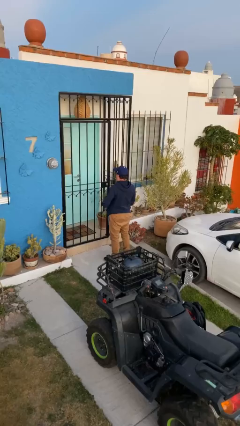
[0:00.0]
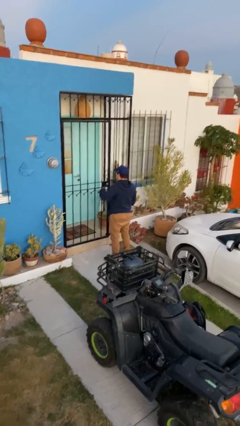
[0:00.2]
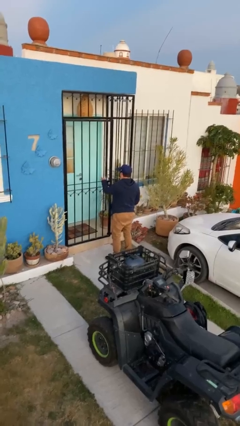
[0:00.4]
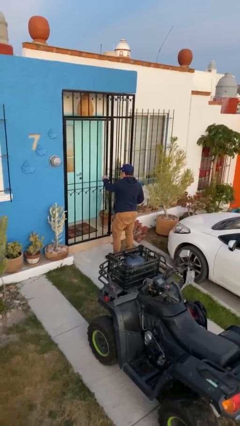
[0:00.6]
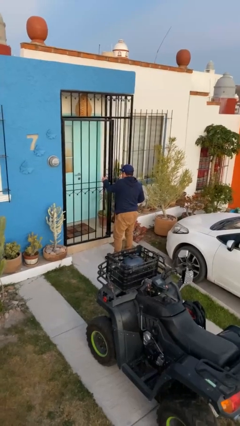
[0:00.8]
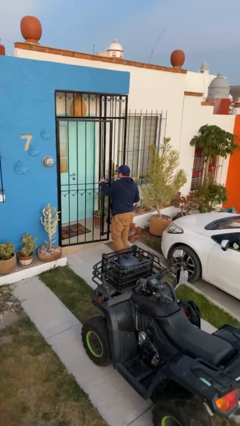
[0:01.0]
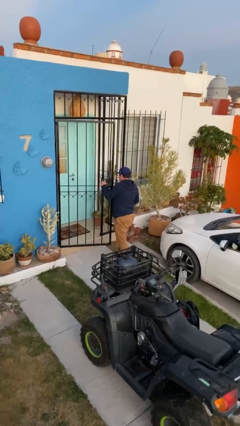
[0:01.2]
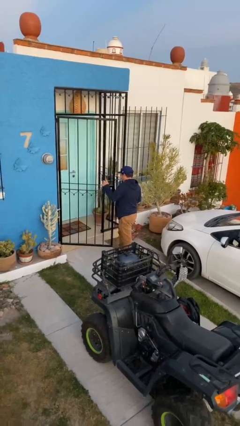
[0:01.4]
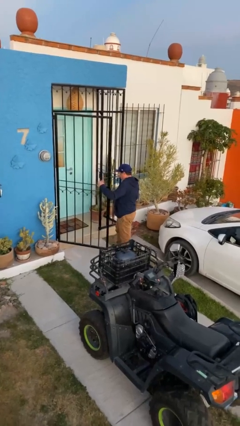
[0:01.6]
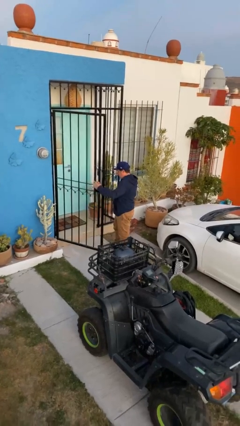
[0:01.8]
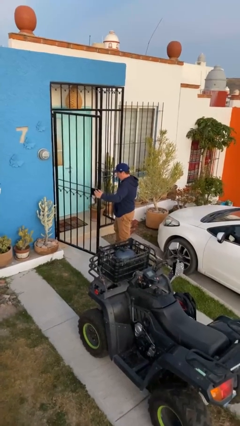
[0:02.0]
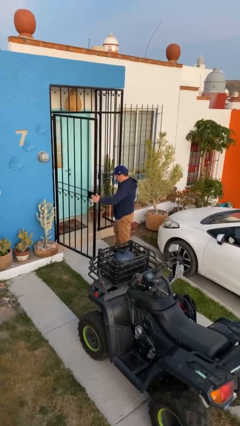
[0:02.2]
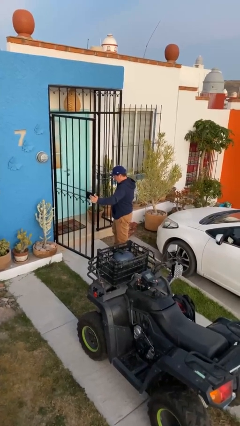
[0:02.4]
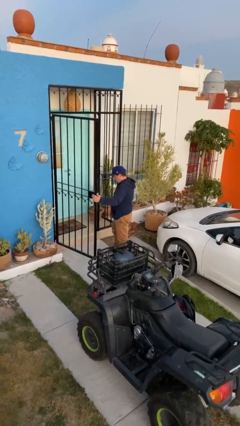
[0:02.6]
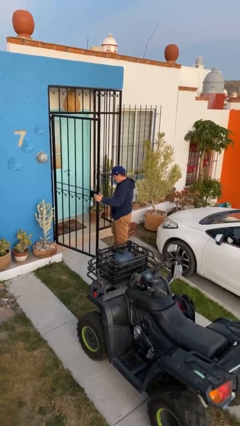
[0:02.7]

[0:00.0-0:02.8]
person opens facility door

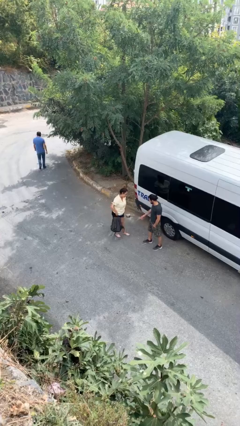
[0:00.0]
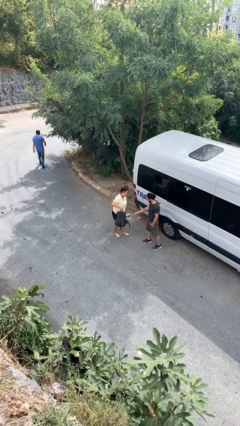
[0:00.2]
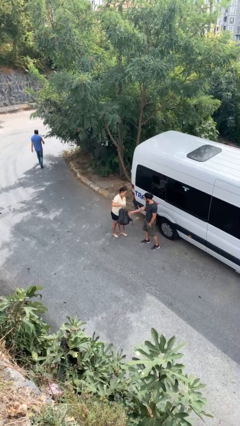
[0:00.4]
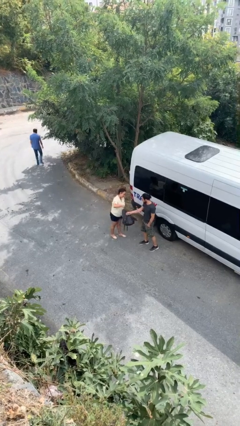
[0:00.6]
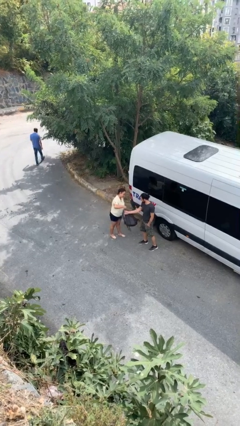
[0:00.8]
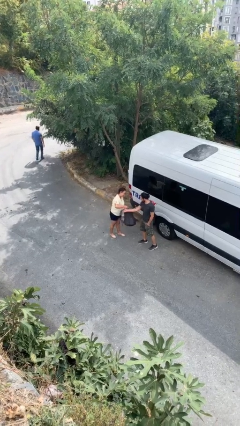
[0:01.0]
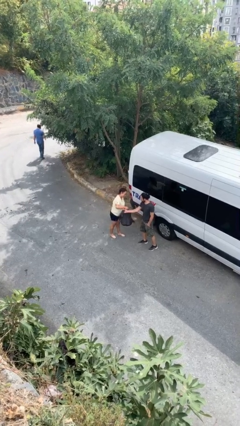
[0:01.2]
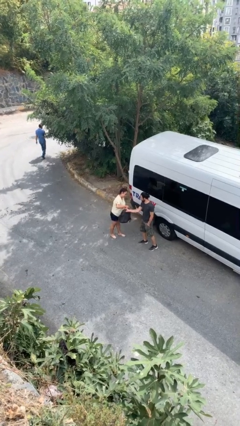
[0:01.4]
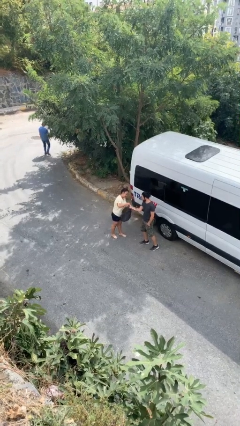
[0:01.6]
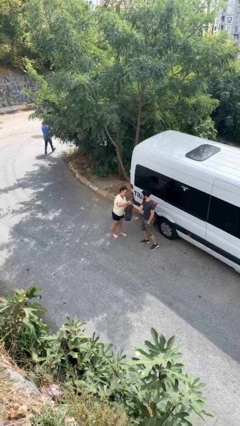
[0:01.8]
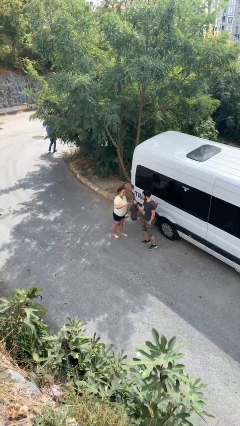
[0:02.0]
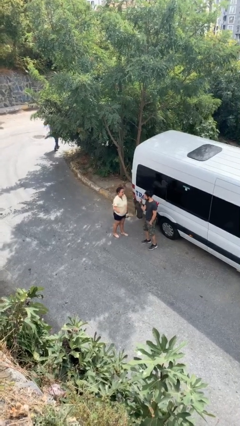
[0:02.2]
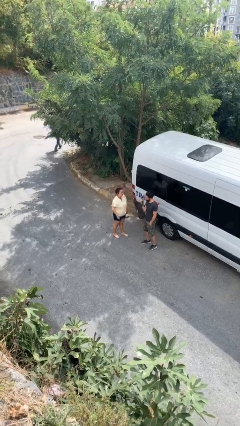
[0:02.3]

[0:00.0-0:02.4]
person transfers object to person

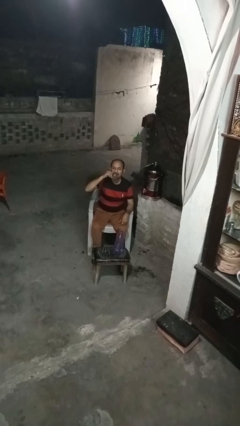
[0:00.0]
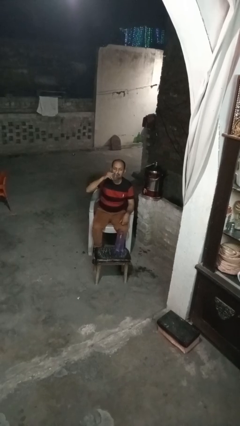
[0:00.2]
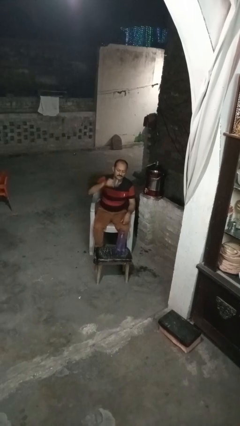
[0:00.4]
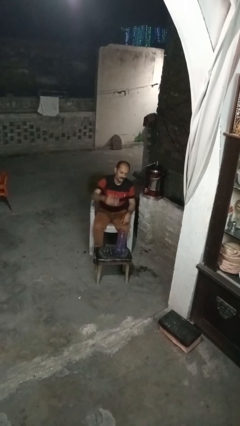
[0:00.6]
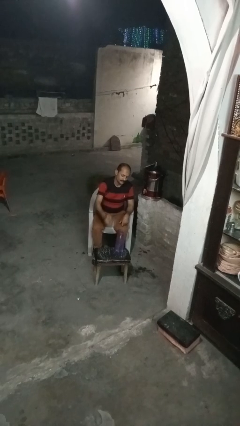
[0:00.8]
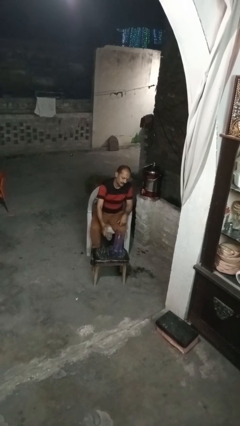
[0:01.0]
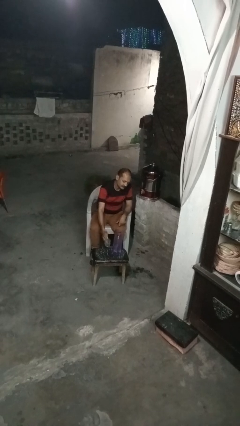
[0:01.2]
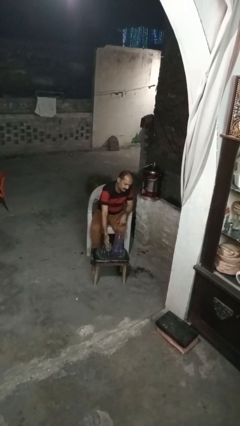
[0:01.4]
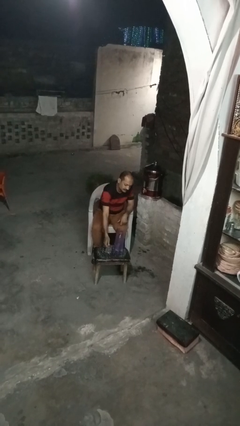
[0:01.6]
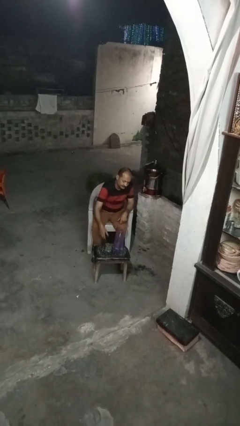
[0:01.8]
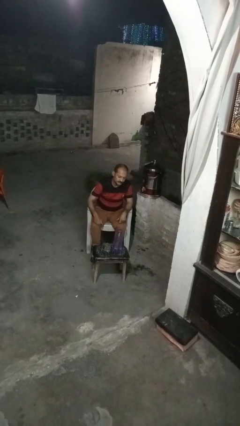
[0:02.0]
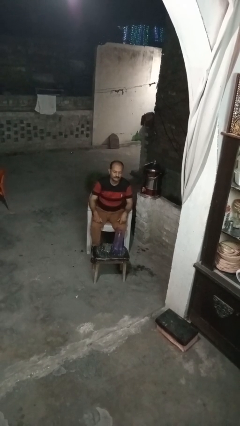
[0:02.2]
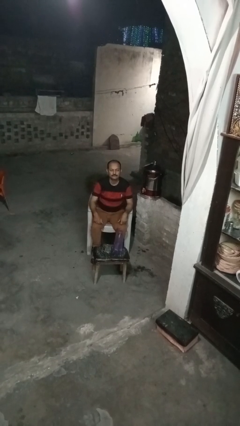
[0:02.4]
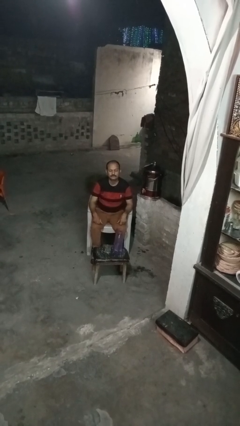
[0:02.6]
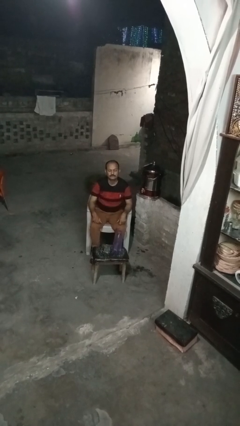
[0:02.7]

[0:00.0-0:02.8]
person puts down object on table

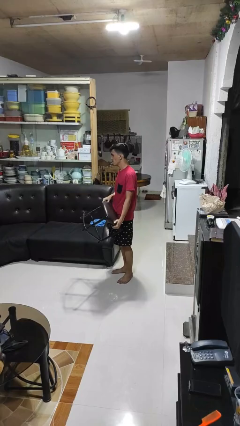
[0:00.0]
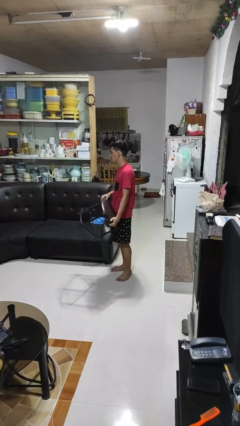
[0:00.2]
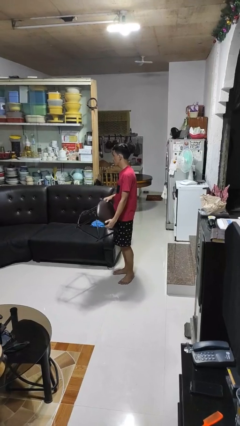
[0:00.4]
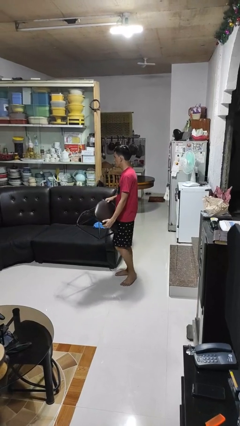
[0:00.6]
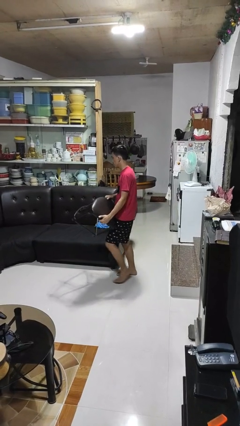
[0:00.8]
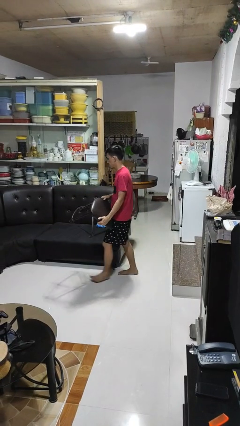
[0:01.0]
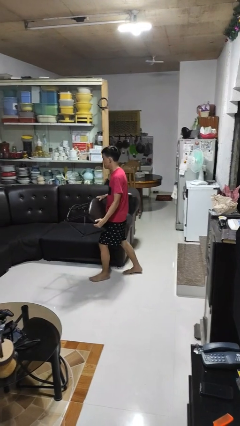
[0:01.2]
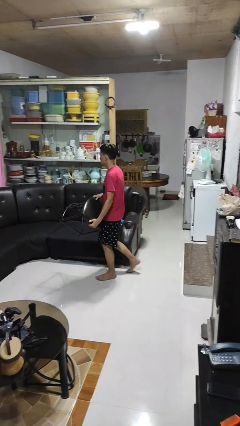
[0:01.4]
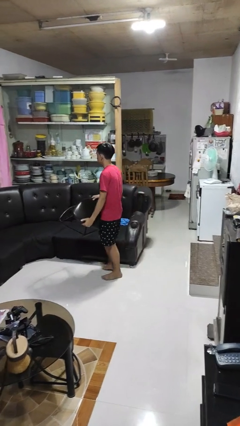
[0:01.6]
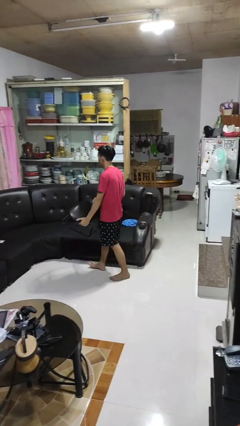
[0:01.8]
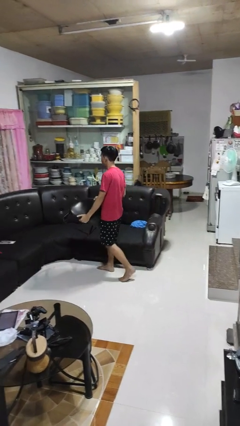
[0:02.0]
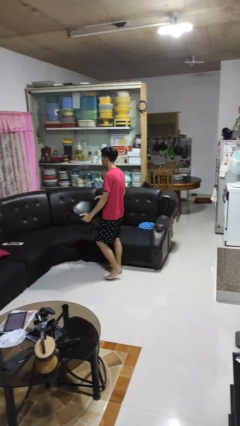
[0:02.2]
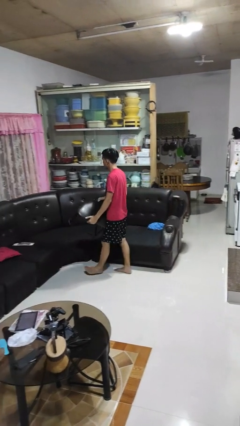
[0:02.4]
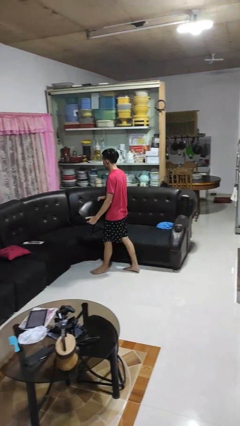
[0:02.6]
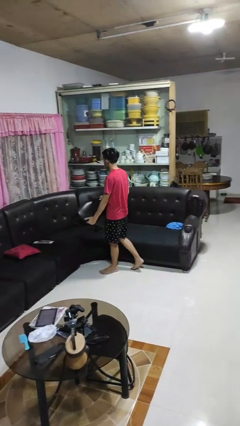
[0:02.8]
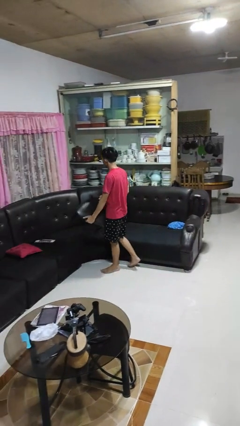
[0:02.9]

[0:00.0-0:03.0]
person carries furniture

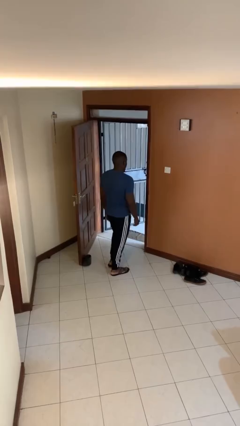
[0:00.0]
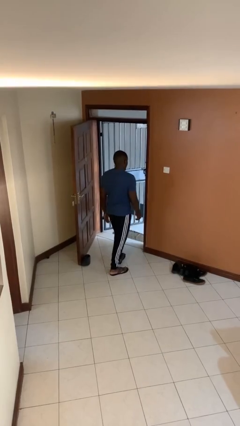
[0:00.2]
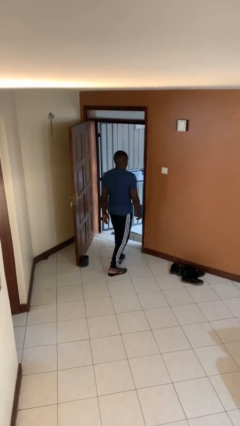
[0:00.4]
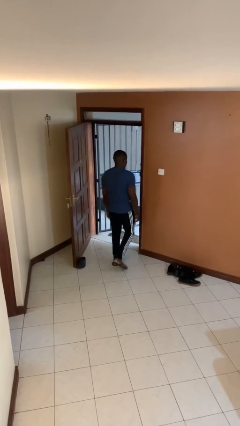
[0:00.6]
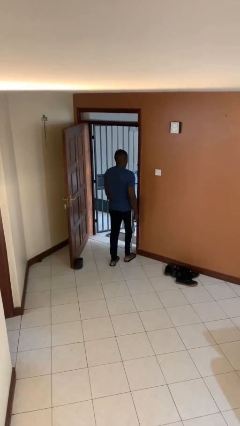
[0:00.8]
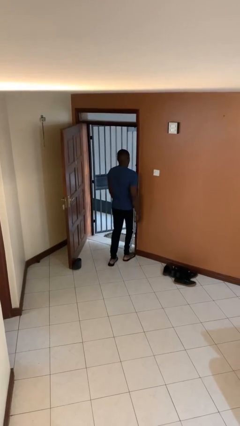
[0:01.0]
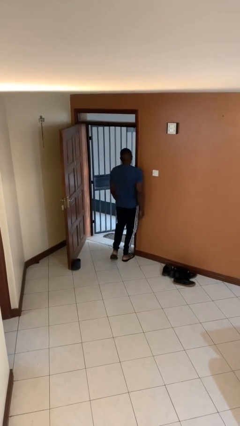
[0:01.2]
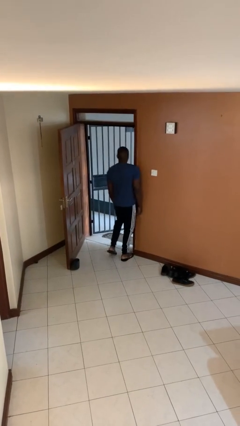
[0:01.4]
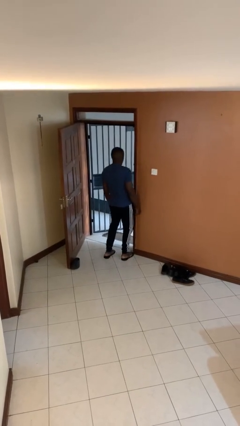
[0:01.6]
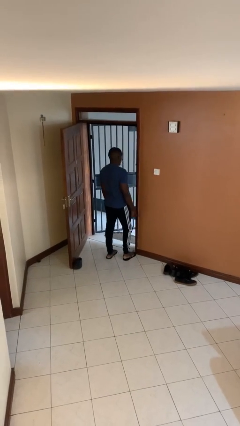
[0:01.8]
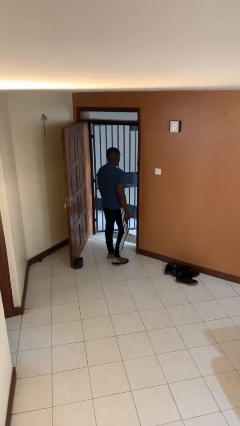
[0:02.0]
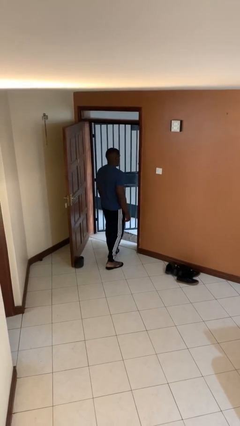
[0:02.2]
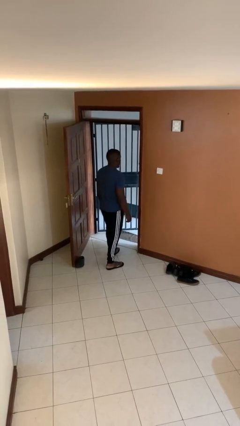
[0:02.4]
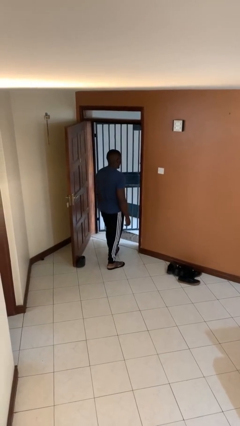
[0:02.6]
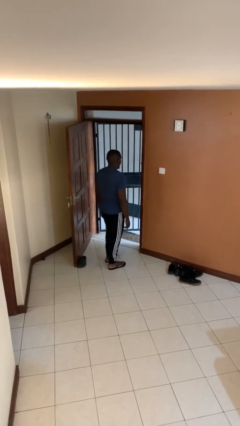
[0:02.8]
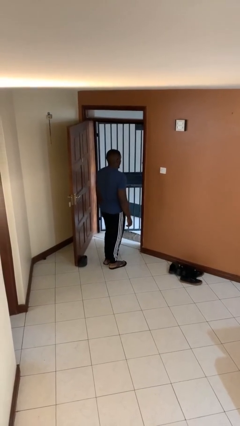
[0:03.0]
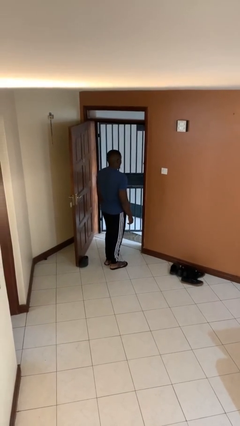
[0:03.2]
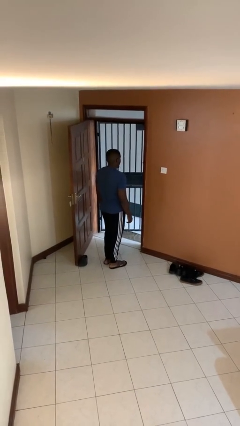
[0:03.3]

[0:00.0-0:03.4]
person bumps into wall

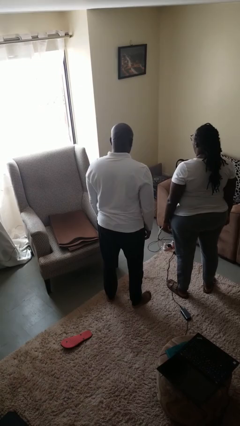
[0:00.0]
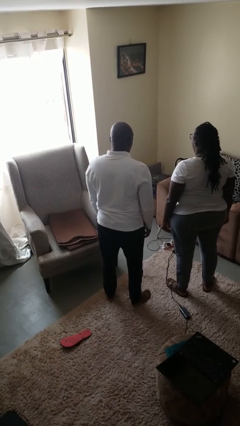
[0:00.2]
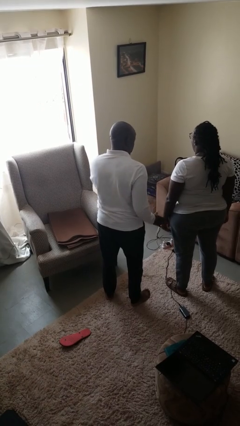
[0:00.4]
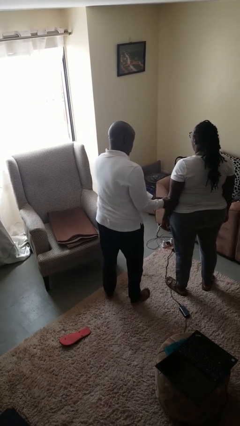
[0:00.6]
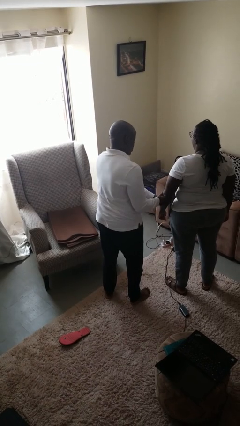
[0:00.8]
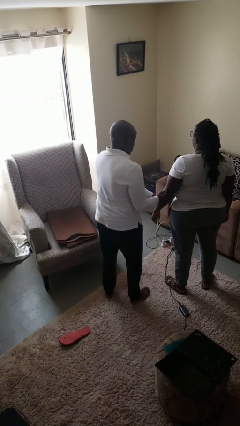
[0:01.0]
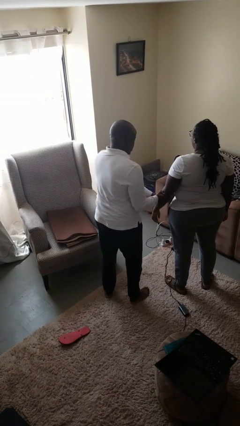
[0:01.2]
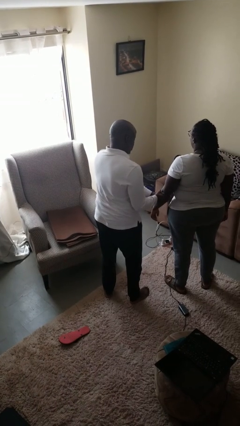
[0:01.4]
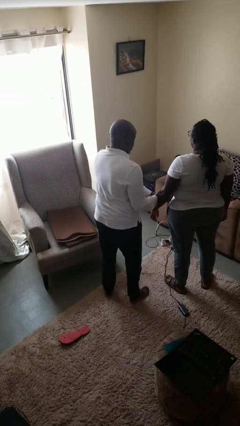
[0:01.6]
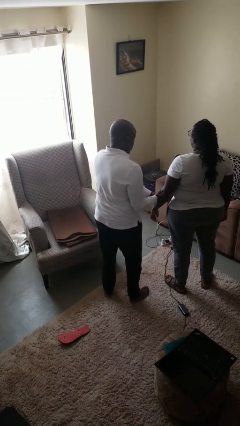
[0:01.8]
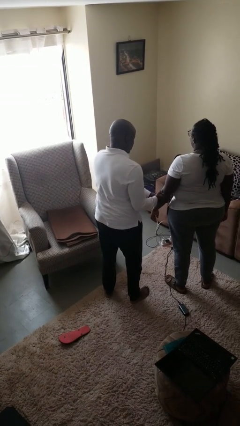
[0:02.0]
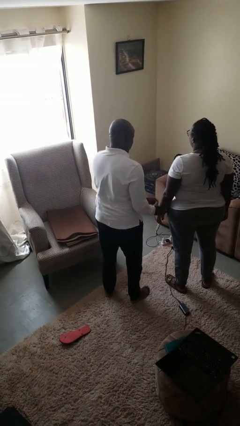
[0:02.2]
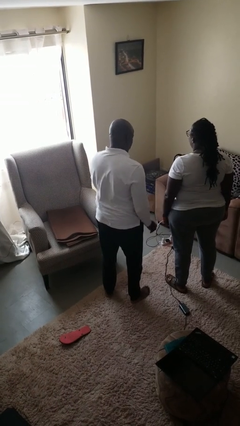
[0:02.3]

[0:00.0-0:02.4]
person grabs person by forearm

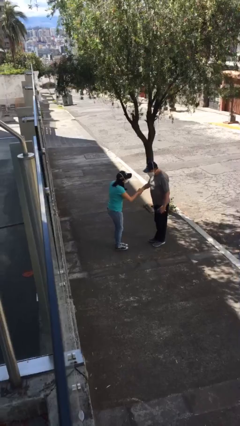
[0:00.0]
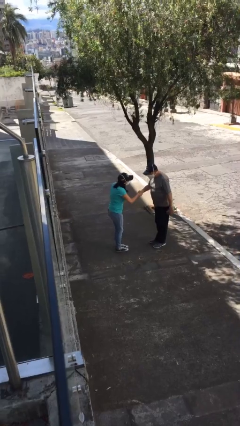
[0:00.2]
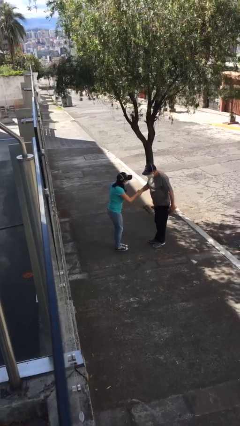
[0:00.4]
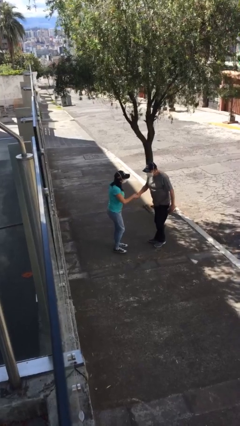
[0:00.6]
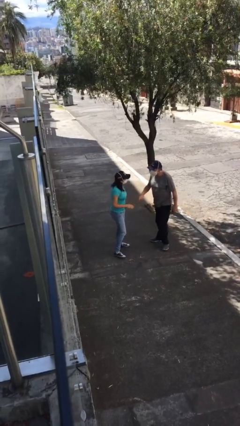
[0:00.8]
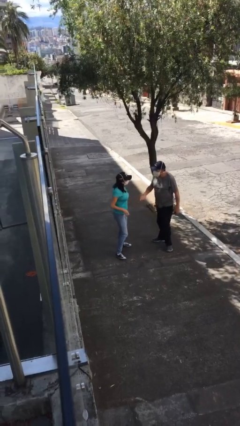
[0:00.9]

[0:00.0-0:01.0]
person shakes hand
